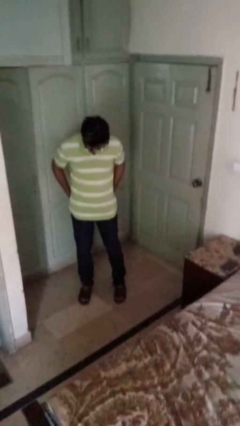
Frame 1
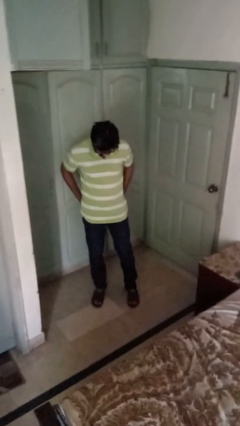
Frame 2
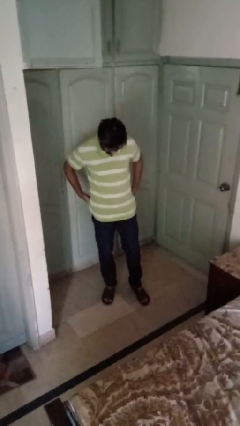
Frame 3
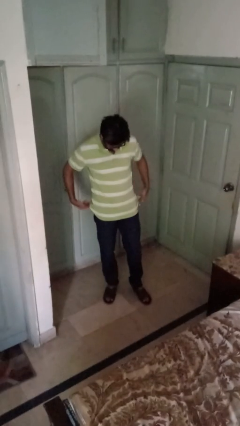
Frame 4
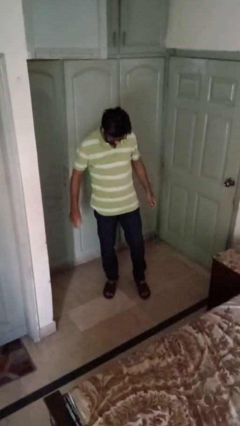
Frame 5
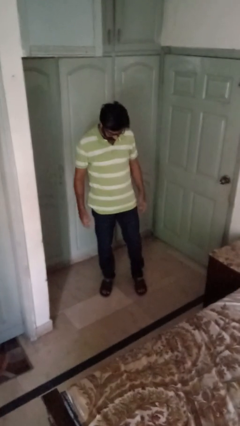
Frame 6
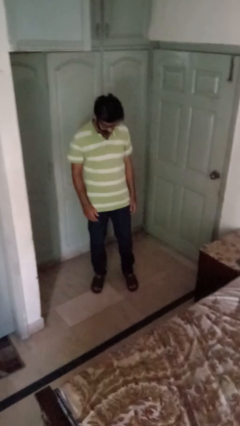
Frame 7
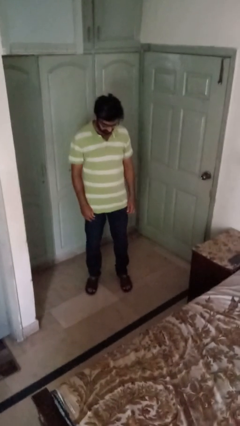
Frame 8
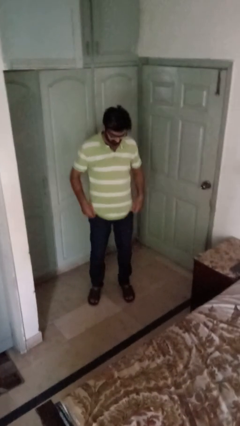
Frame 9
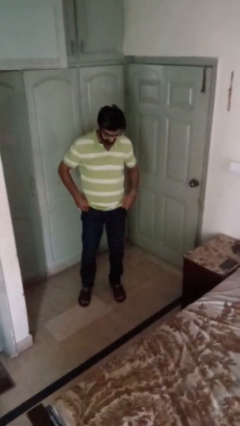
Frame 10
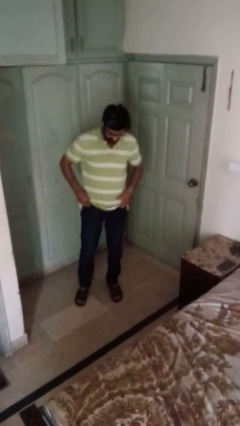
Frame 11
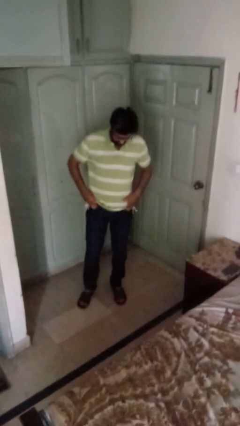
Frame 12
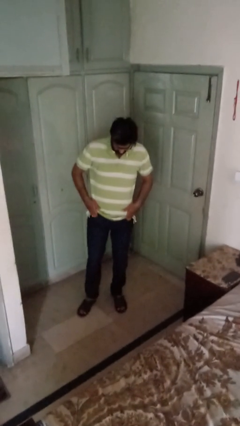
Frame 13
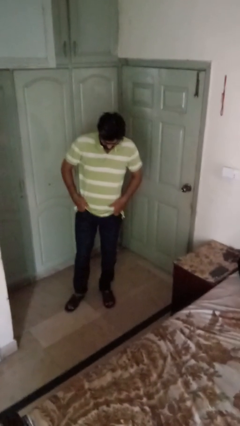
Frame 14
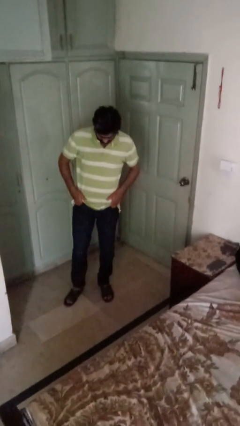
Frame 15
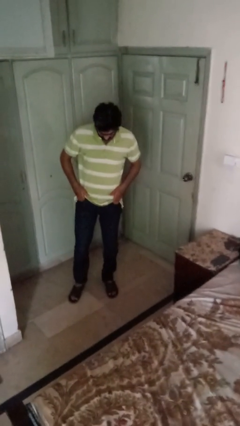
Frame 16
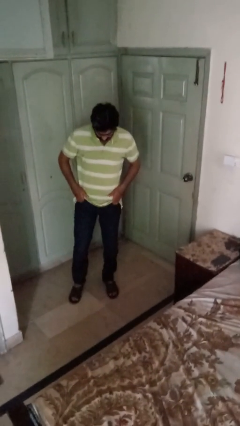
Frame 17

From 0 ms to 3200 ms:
person puts hands in back pockets

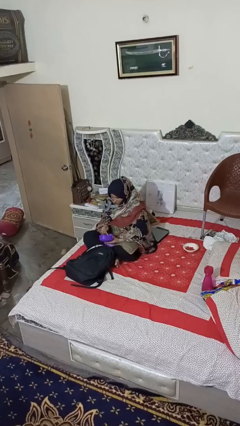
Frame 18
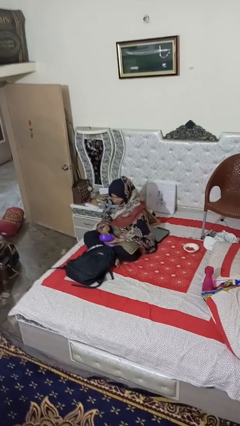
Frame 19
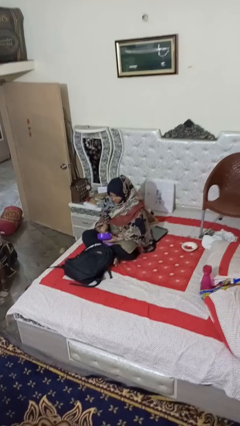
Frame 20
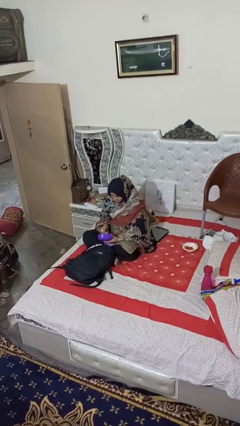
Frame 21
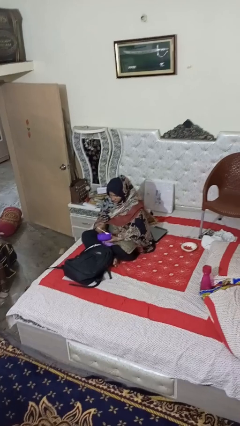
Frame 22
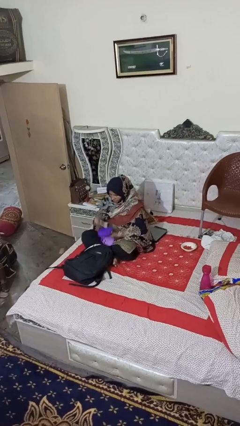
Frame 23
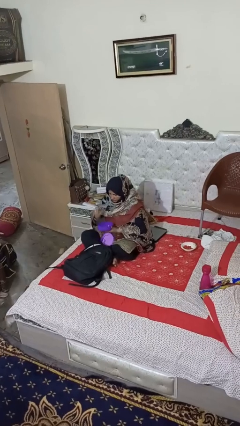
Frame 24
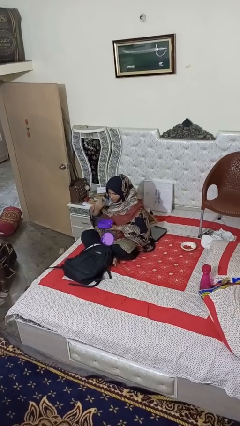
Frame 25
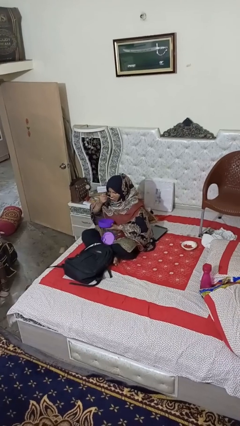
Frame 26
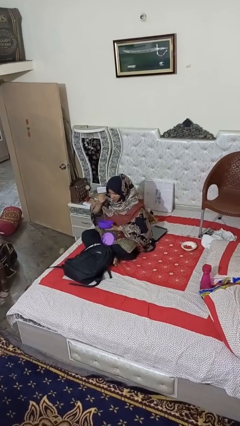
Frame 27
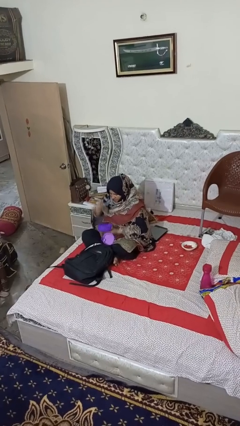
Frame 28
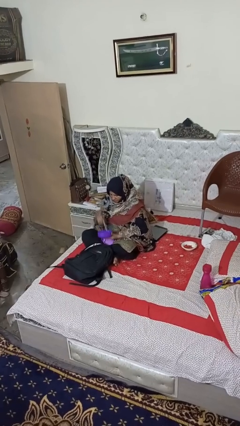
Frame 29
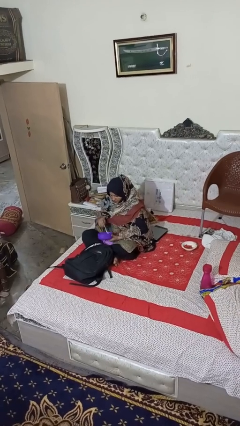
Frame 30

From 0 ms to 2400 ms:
person eats snack from bag

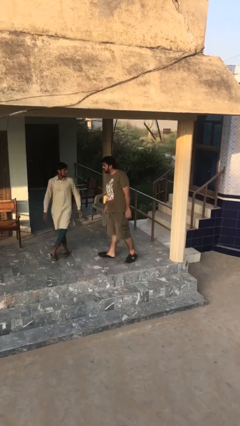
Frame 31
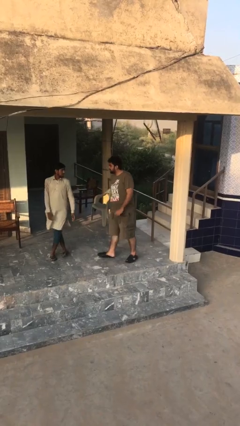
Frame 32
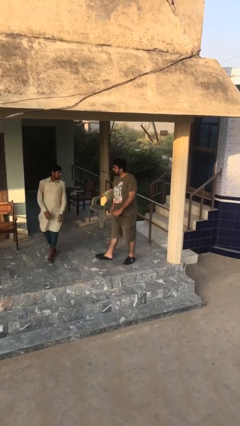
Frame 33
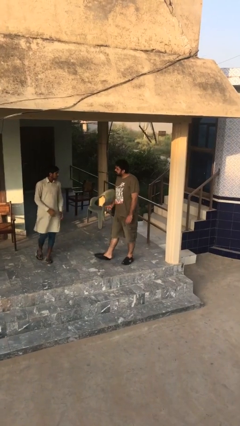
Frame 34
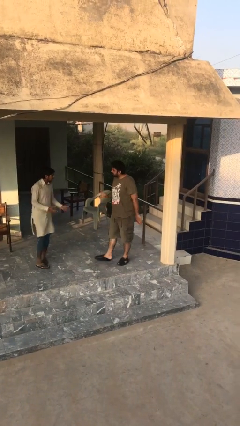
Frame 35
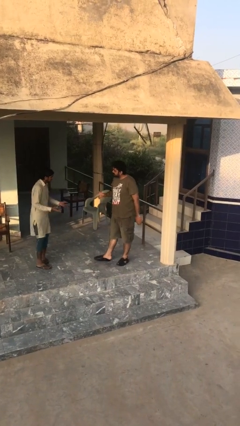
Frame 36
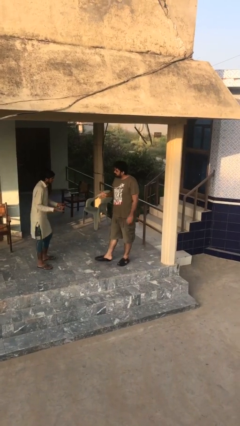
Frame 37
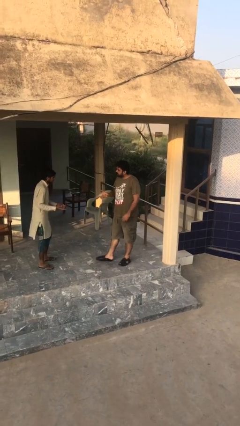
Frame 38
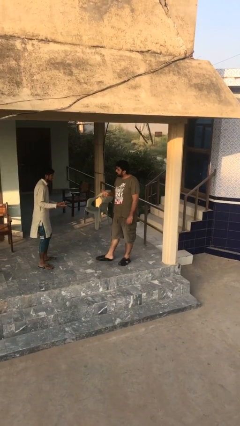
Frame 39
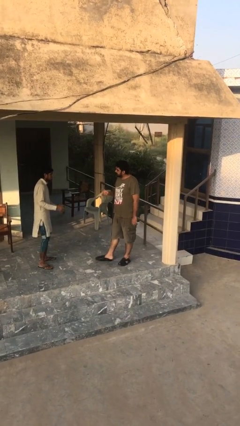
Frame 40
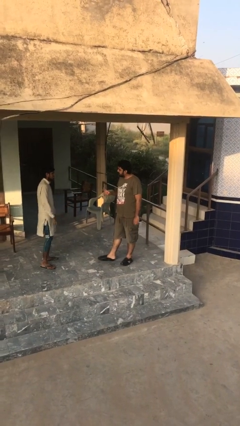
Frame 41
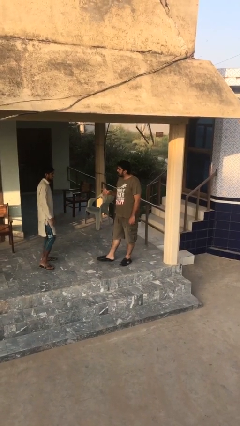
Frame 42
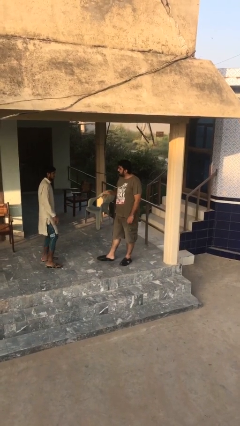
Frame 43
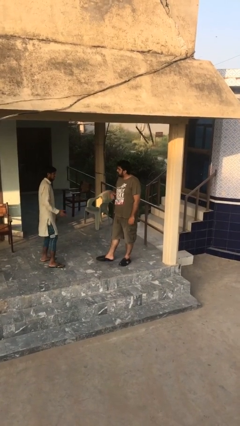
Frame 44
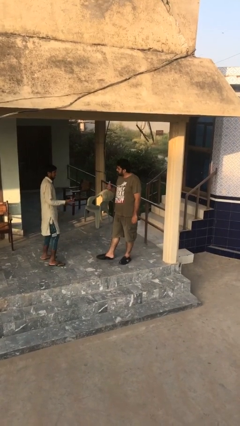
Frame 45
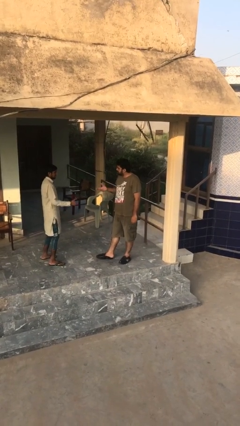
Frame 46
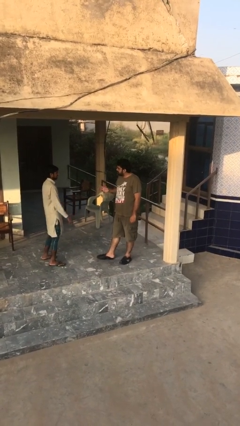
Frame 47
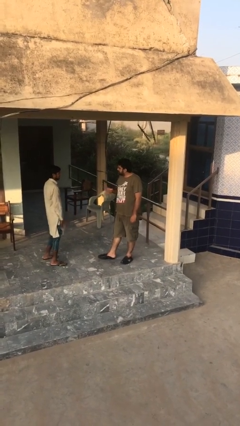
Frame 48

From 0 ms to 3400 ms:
person talks to person

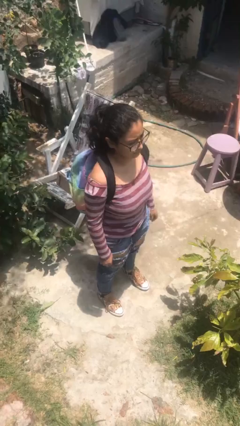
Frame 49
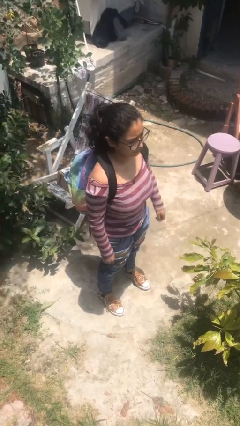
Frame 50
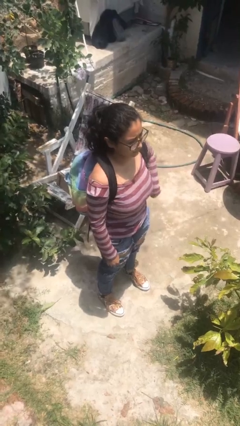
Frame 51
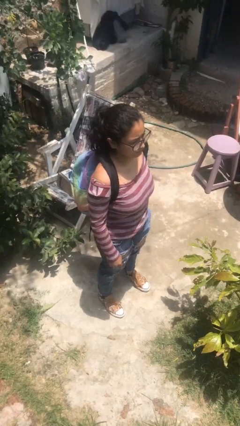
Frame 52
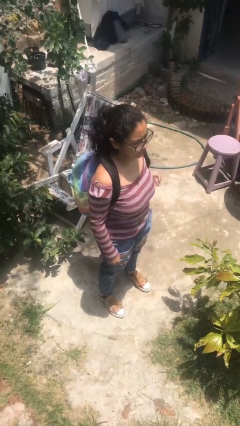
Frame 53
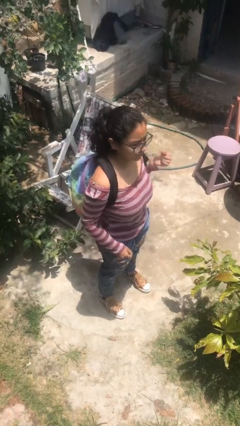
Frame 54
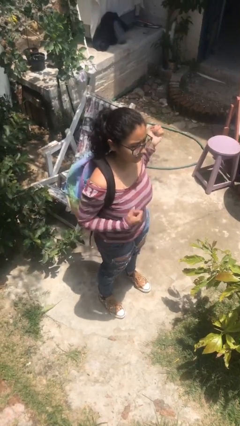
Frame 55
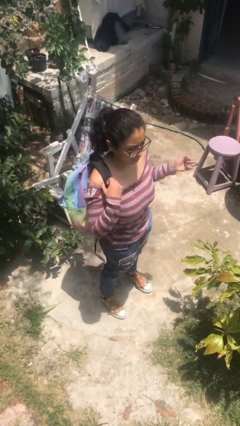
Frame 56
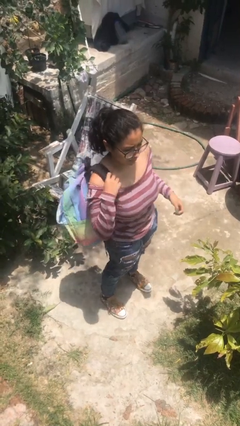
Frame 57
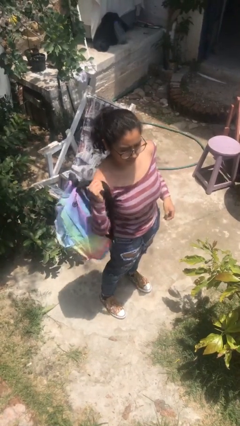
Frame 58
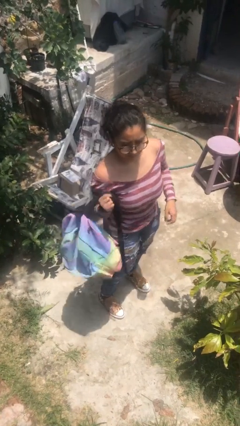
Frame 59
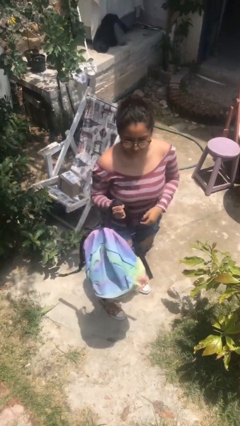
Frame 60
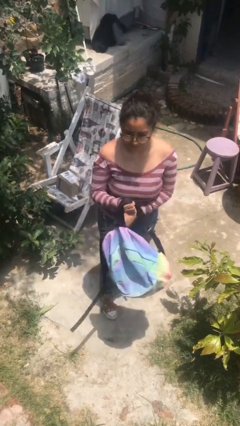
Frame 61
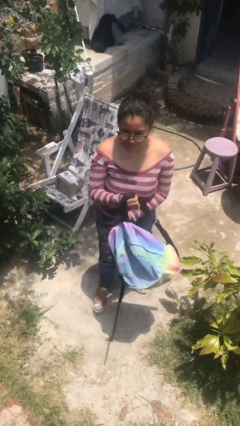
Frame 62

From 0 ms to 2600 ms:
person takes off backpack

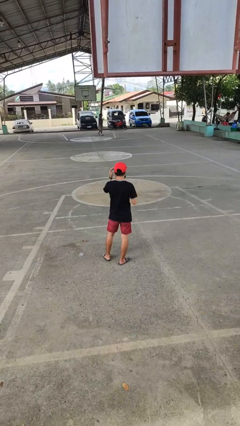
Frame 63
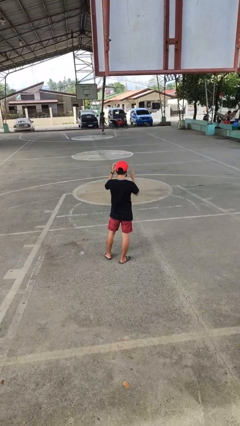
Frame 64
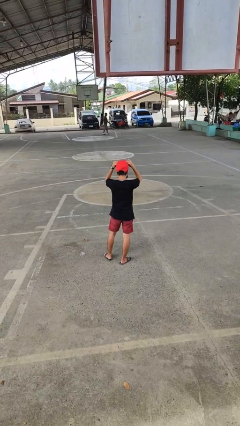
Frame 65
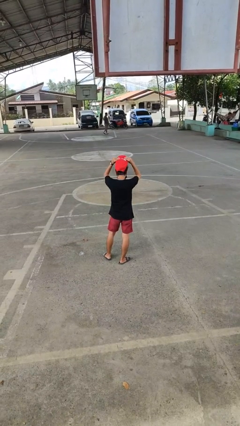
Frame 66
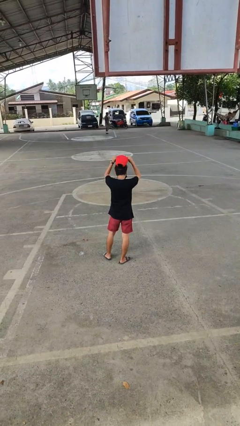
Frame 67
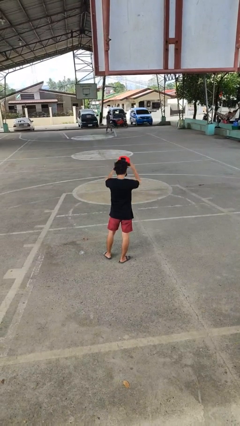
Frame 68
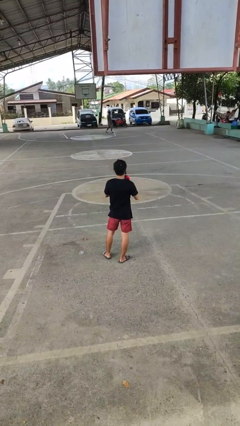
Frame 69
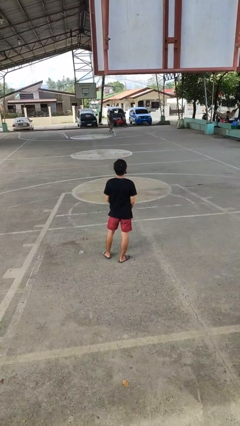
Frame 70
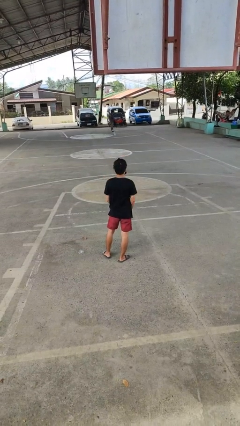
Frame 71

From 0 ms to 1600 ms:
person takes off hat

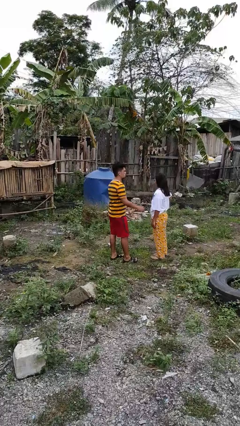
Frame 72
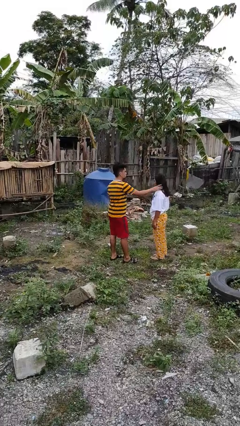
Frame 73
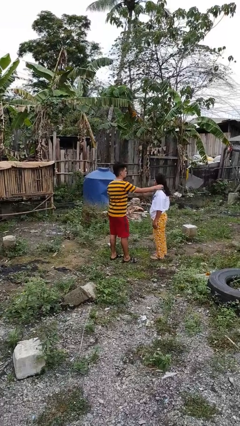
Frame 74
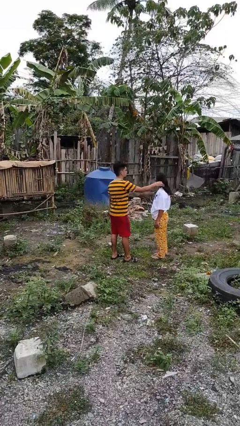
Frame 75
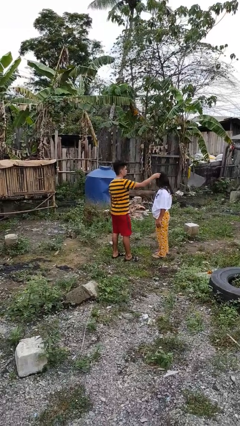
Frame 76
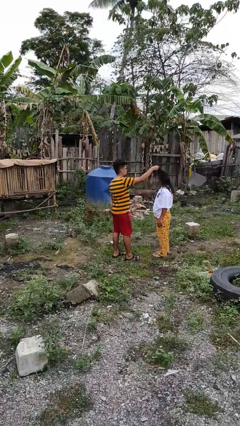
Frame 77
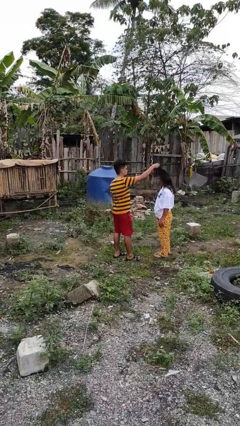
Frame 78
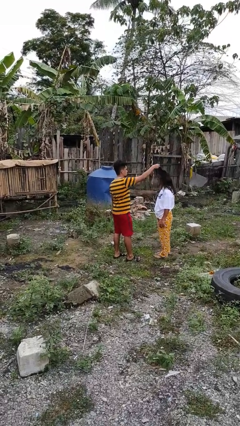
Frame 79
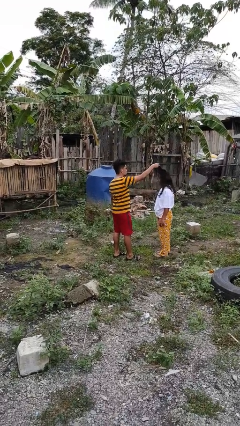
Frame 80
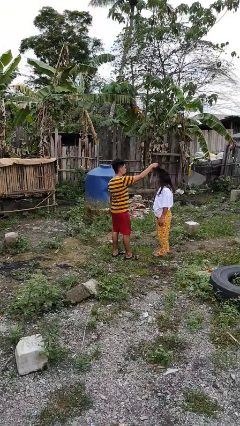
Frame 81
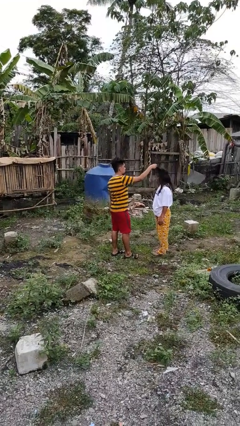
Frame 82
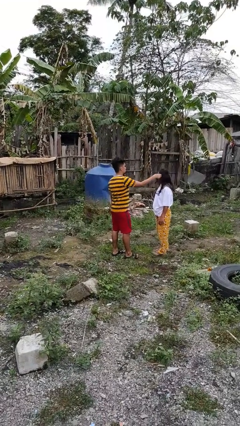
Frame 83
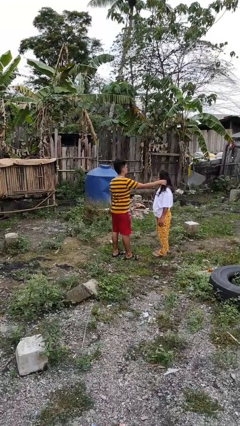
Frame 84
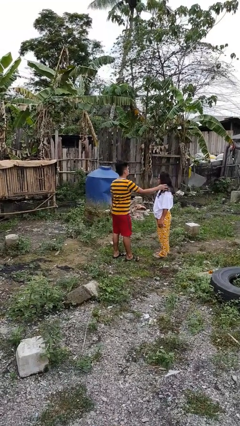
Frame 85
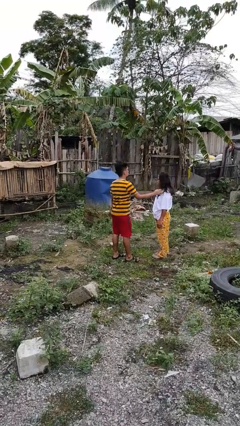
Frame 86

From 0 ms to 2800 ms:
person grabs person by hair

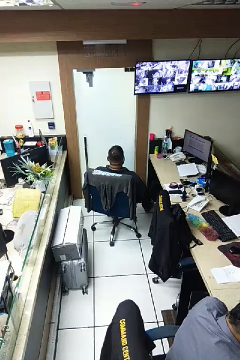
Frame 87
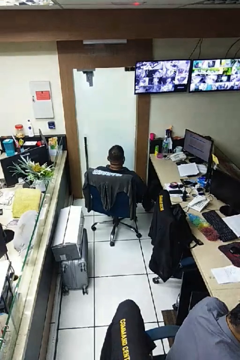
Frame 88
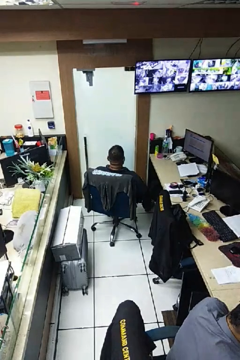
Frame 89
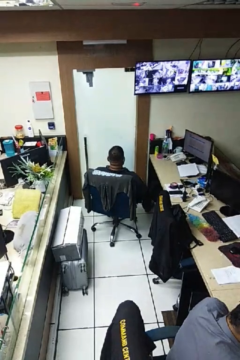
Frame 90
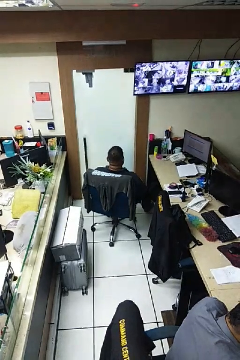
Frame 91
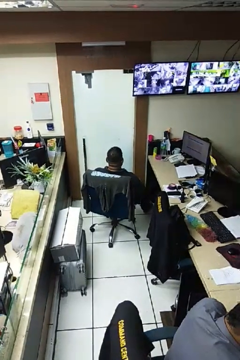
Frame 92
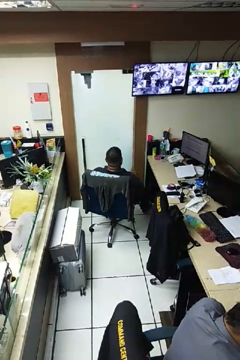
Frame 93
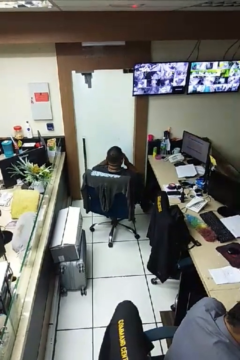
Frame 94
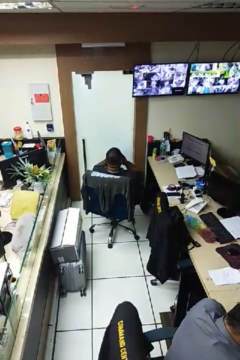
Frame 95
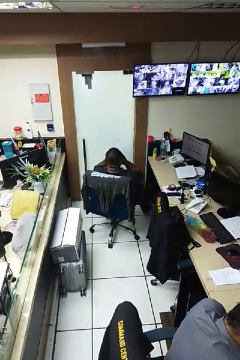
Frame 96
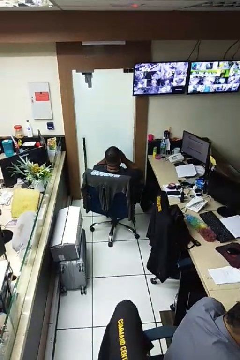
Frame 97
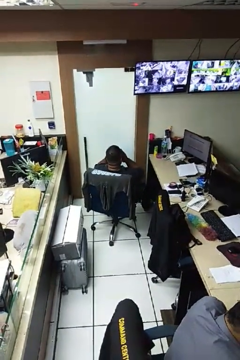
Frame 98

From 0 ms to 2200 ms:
person covers face with hands
